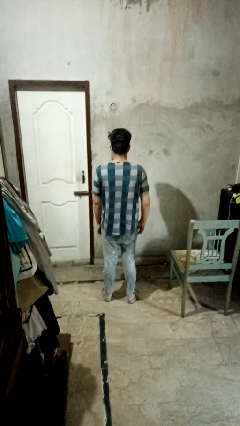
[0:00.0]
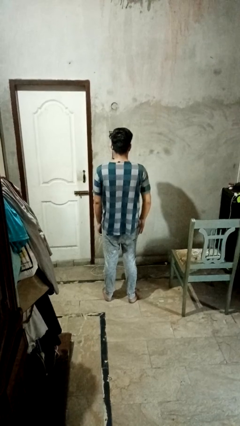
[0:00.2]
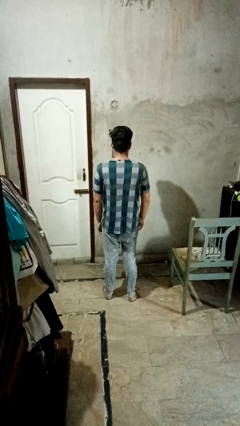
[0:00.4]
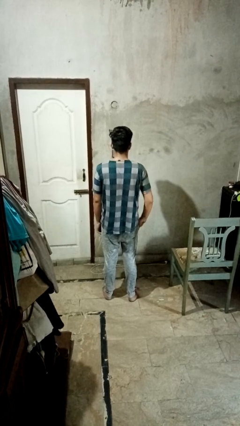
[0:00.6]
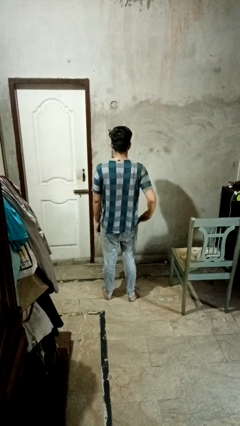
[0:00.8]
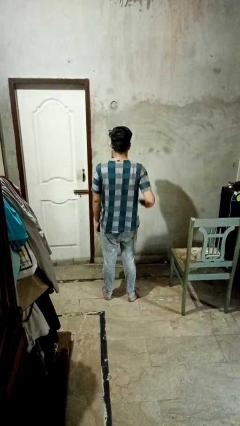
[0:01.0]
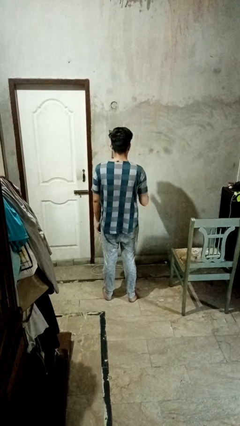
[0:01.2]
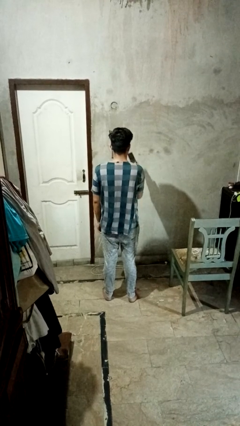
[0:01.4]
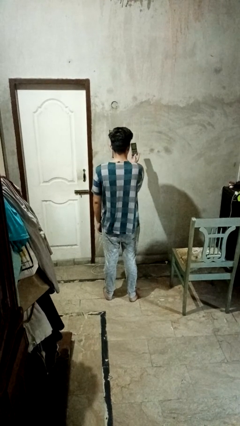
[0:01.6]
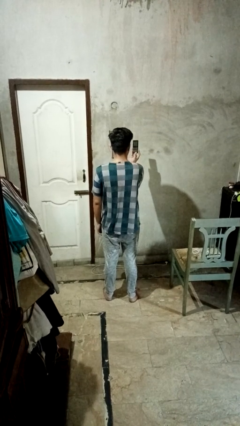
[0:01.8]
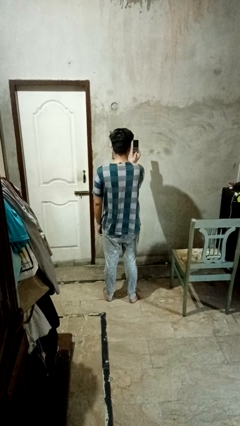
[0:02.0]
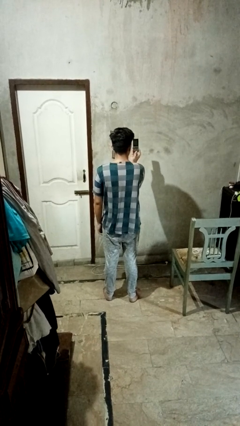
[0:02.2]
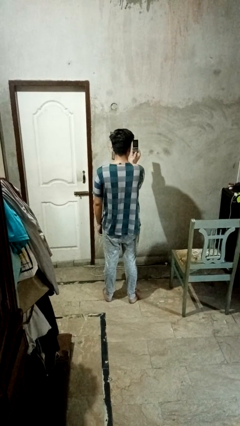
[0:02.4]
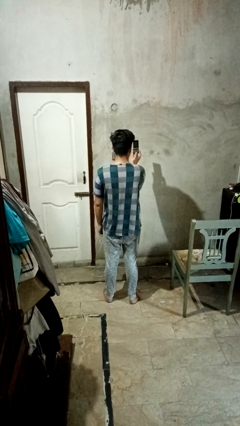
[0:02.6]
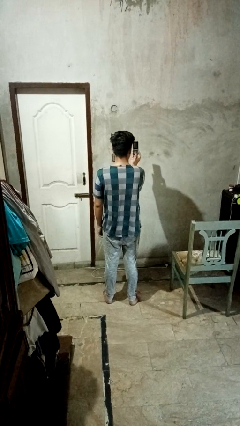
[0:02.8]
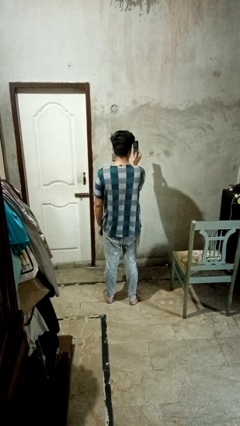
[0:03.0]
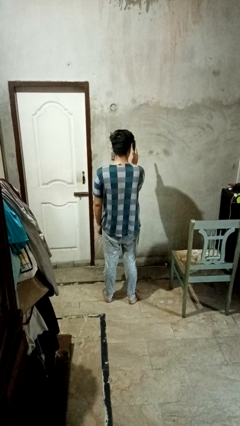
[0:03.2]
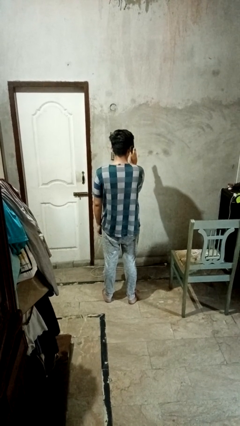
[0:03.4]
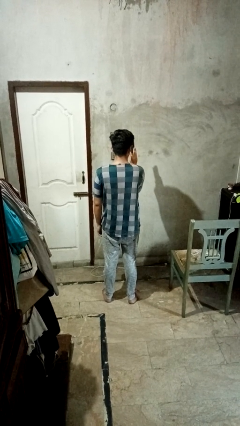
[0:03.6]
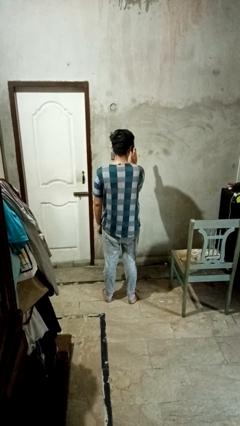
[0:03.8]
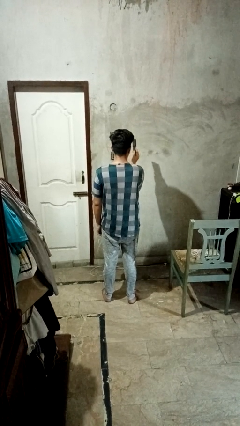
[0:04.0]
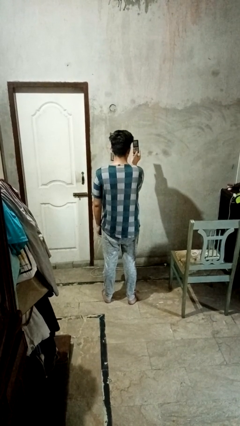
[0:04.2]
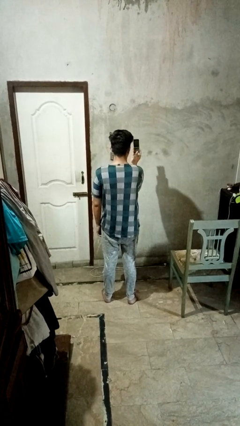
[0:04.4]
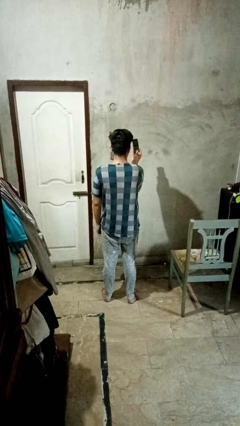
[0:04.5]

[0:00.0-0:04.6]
person takes phone from pocket

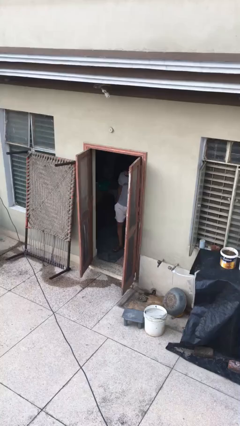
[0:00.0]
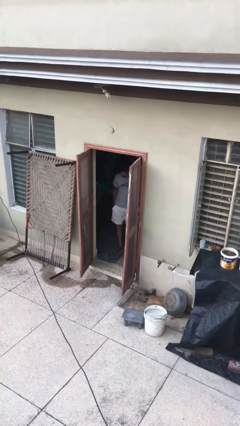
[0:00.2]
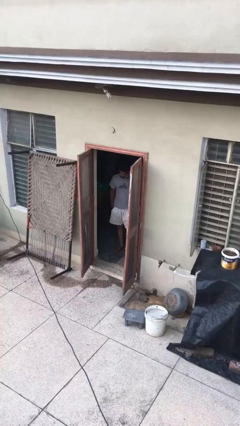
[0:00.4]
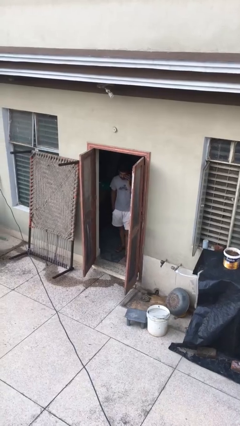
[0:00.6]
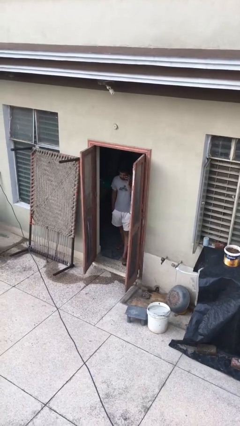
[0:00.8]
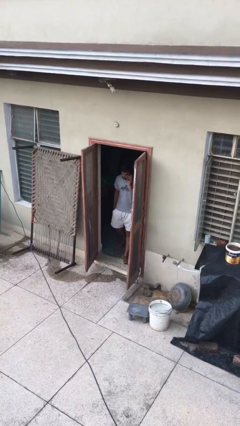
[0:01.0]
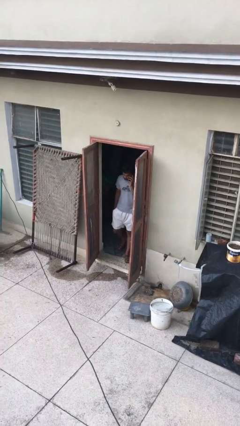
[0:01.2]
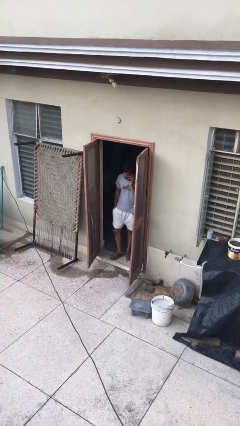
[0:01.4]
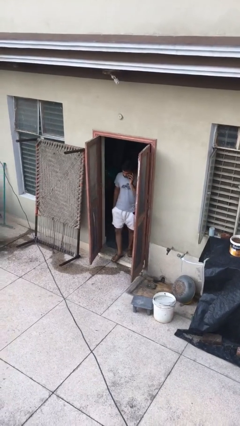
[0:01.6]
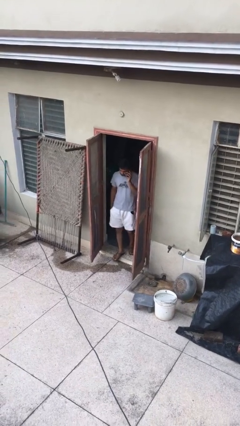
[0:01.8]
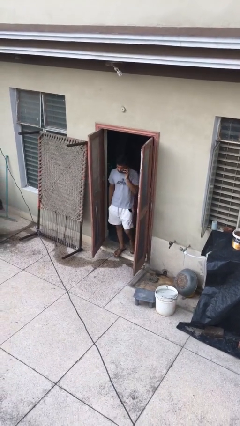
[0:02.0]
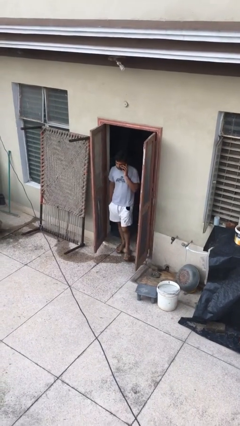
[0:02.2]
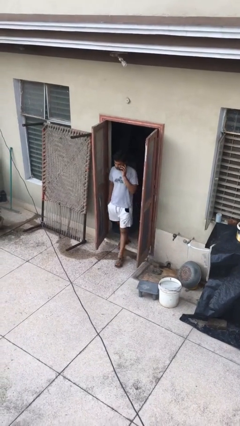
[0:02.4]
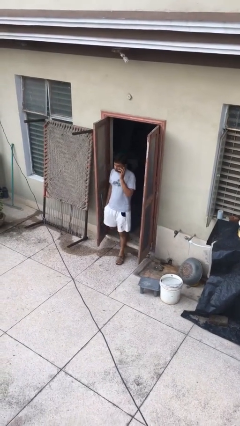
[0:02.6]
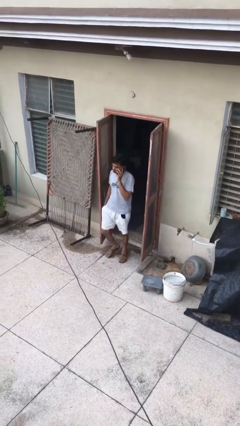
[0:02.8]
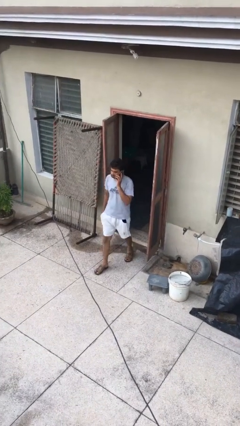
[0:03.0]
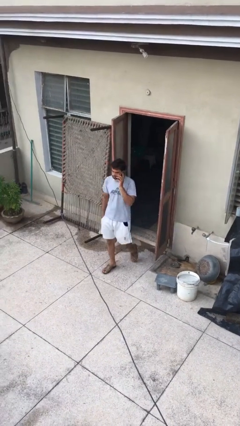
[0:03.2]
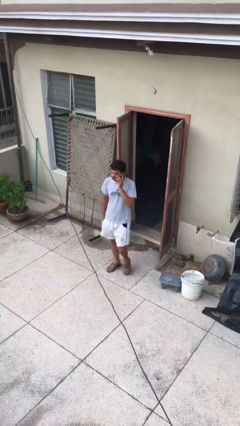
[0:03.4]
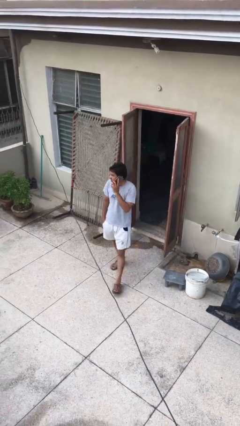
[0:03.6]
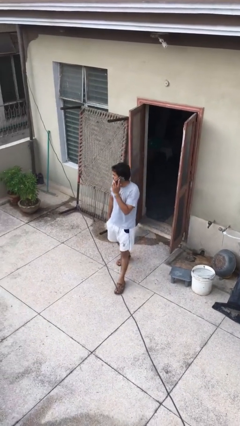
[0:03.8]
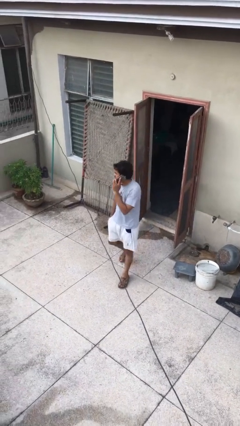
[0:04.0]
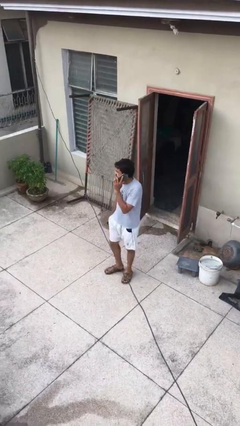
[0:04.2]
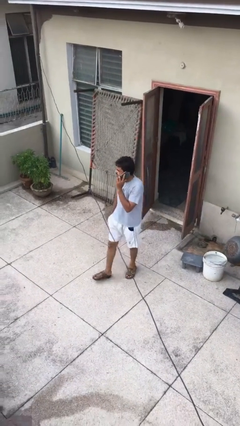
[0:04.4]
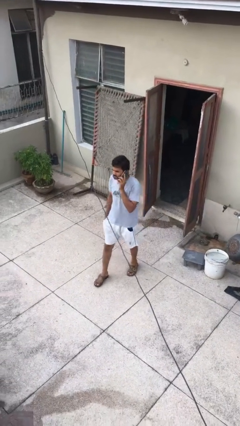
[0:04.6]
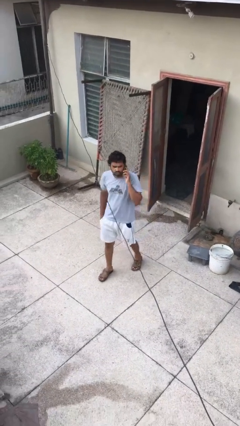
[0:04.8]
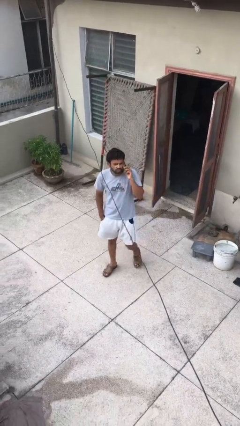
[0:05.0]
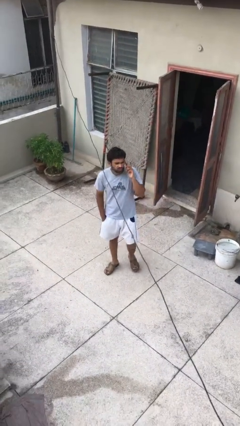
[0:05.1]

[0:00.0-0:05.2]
person enters scene through structure

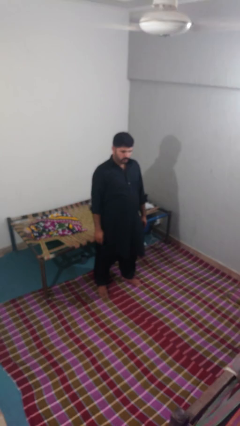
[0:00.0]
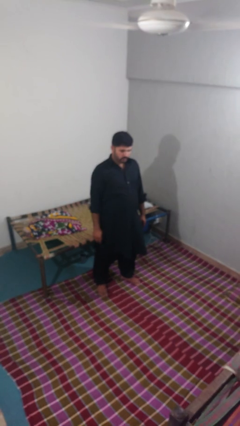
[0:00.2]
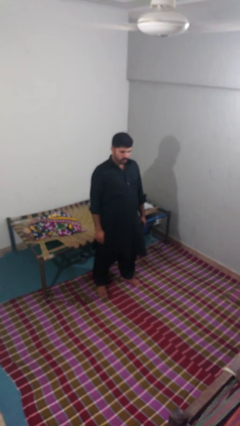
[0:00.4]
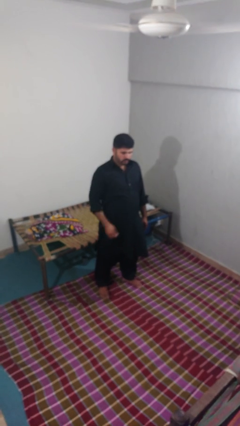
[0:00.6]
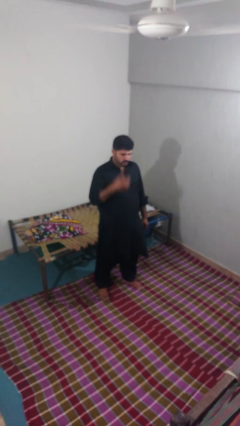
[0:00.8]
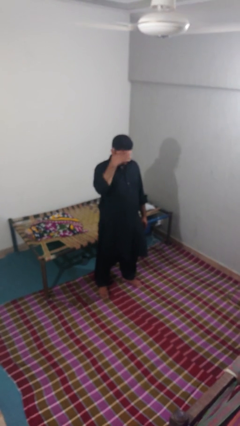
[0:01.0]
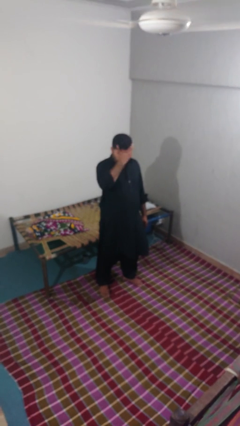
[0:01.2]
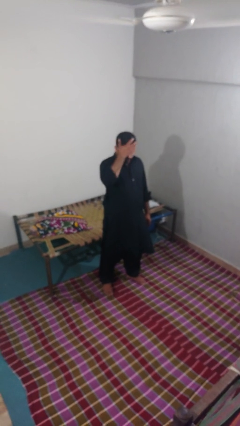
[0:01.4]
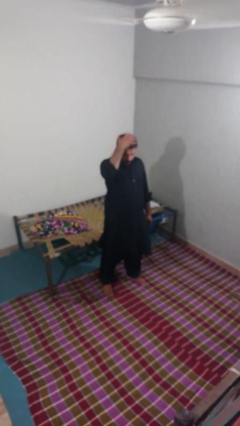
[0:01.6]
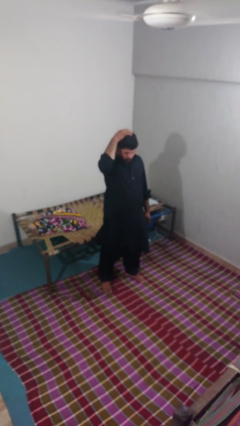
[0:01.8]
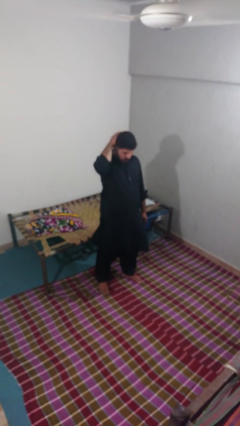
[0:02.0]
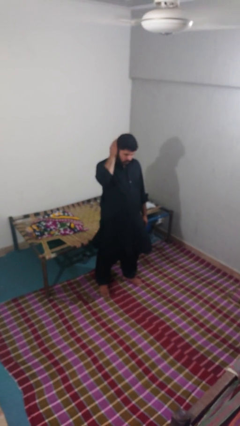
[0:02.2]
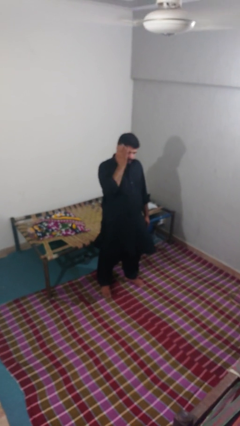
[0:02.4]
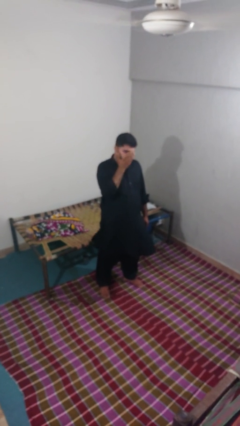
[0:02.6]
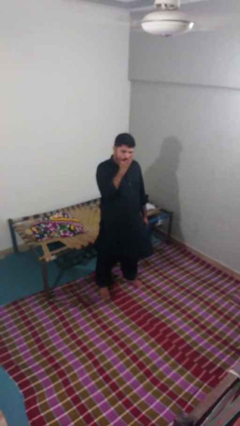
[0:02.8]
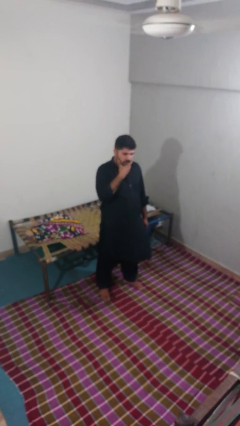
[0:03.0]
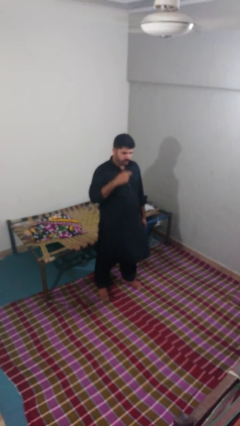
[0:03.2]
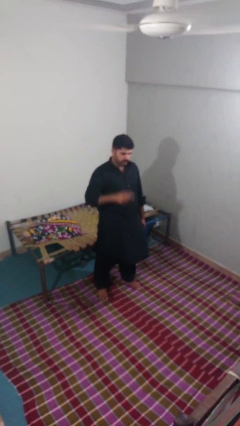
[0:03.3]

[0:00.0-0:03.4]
person scratches face

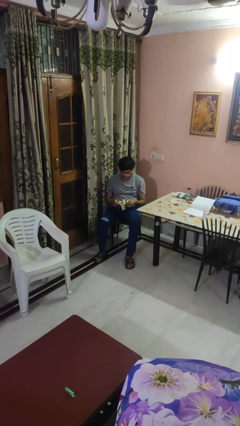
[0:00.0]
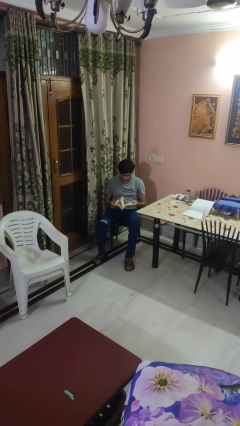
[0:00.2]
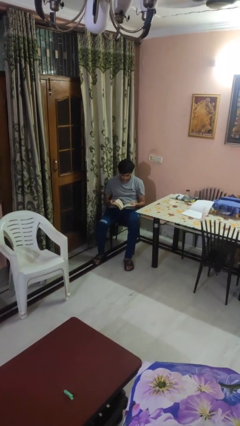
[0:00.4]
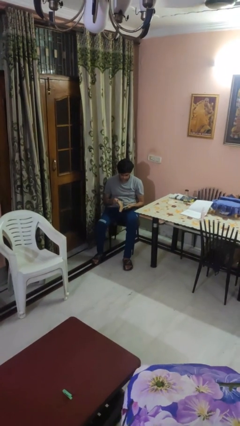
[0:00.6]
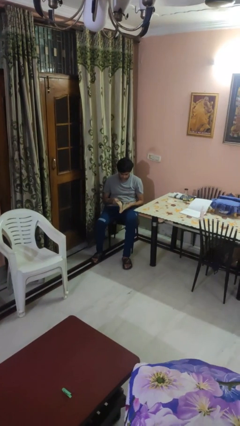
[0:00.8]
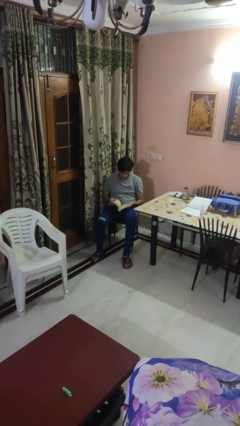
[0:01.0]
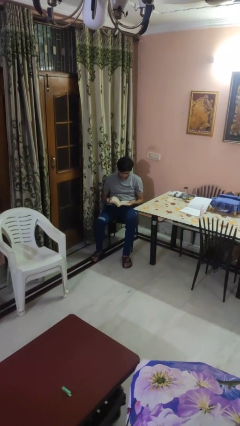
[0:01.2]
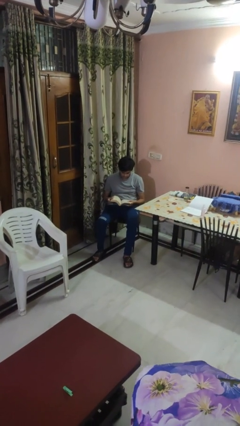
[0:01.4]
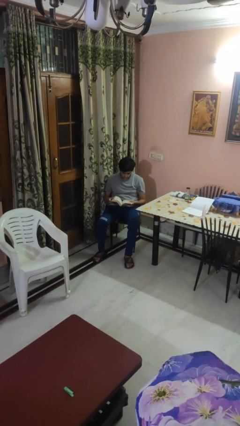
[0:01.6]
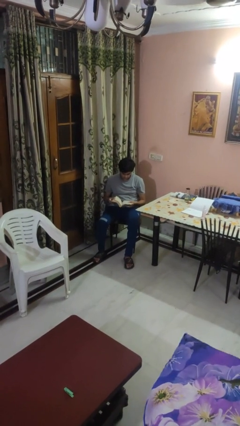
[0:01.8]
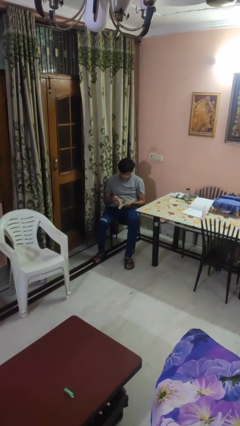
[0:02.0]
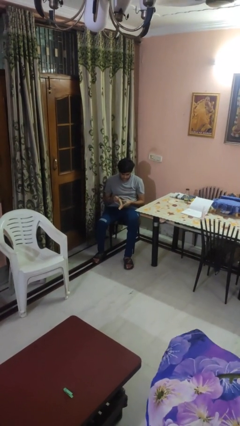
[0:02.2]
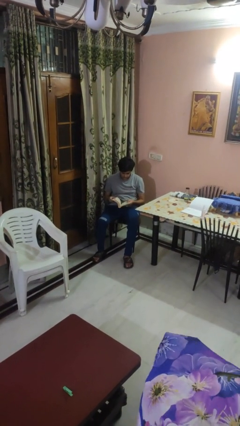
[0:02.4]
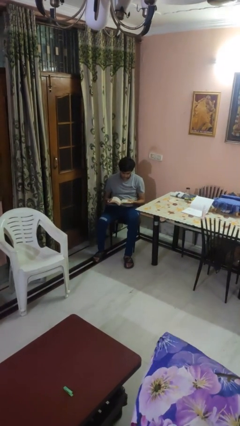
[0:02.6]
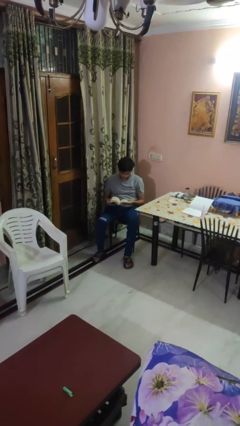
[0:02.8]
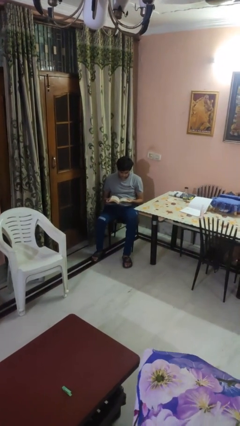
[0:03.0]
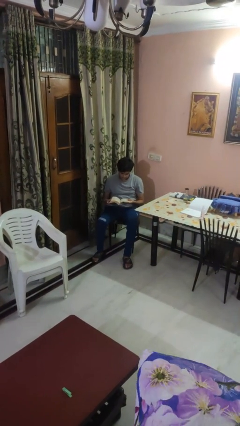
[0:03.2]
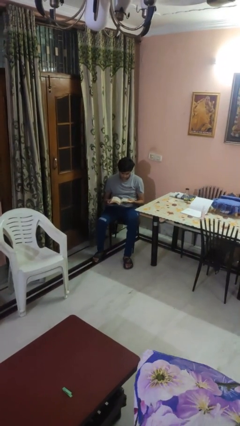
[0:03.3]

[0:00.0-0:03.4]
person reads book

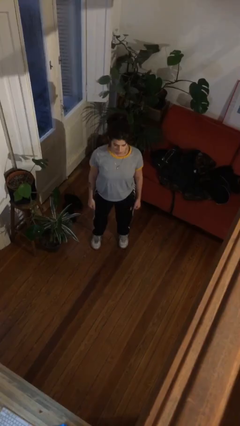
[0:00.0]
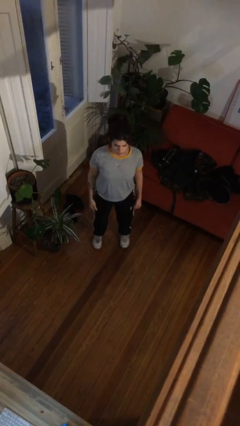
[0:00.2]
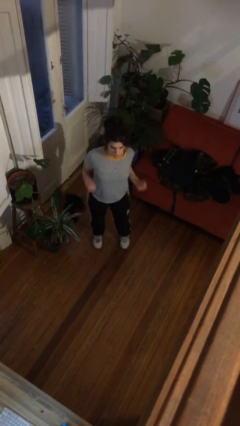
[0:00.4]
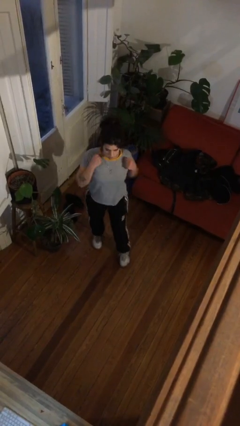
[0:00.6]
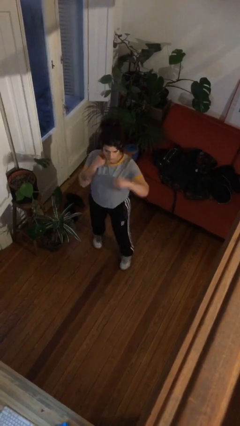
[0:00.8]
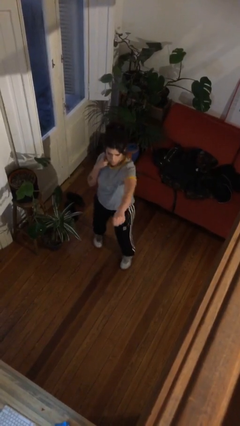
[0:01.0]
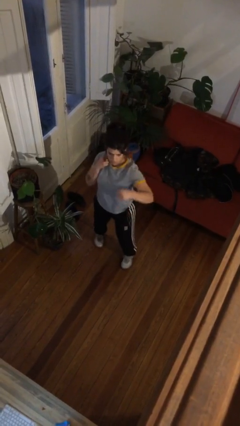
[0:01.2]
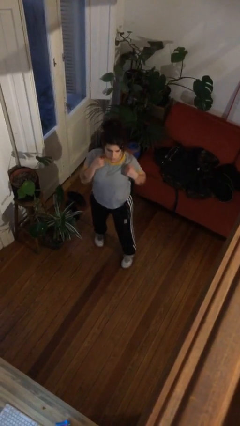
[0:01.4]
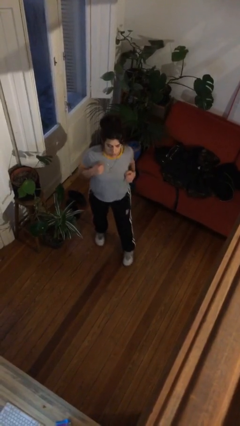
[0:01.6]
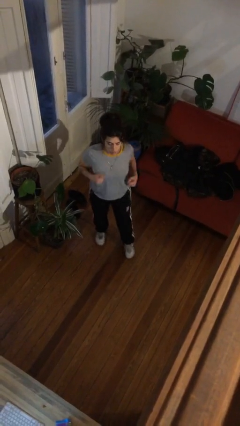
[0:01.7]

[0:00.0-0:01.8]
person punches
